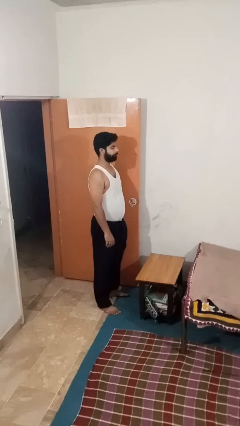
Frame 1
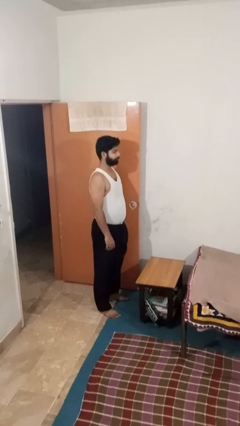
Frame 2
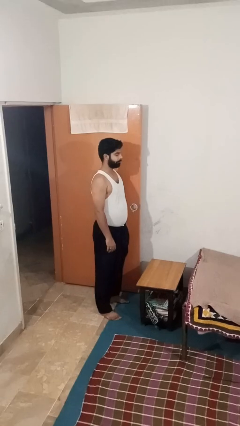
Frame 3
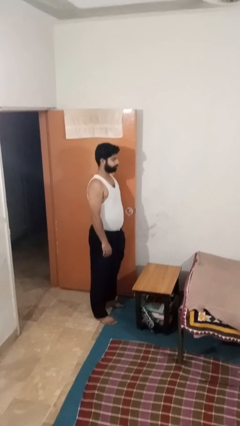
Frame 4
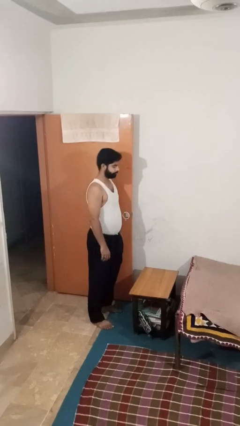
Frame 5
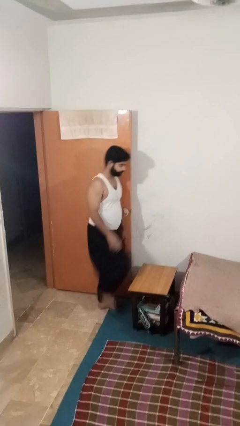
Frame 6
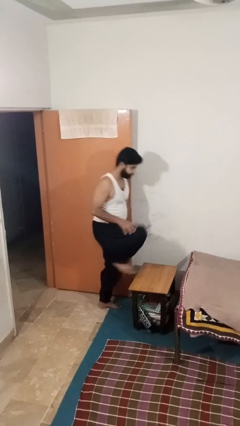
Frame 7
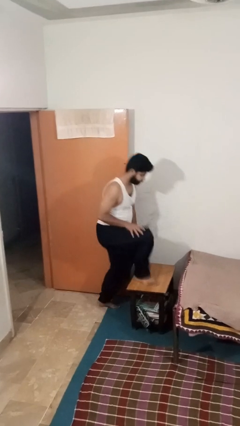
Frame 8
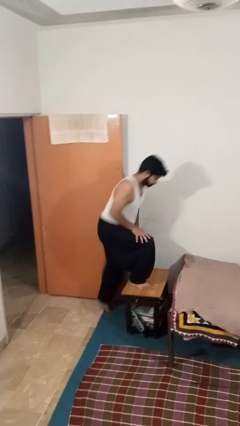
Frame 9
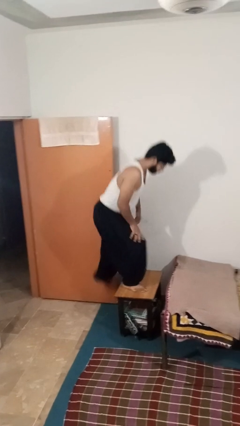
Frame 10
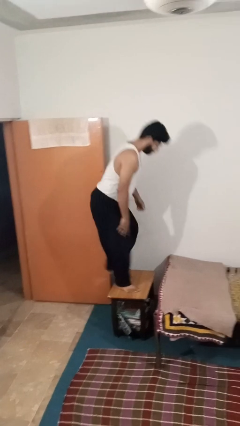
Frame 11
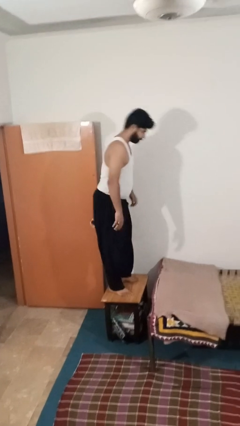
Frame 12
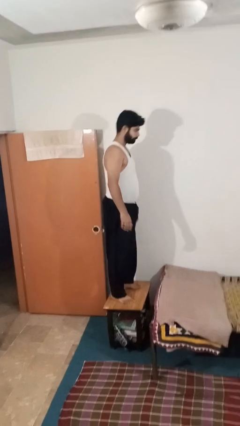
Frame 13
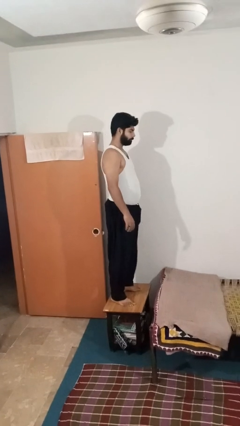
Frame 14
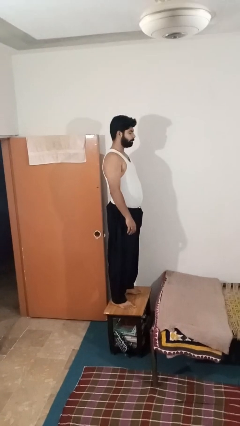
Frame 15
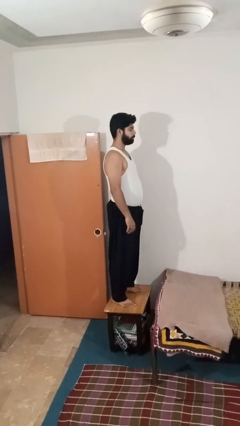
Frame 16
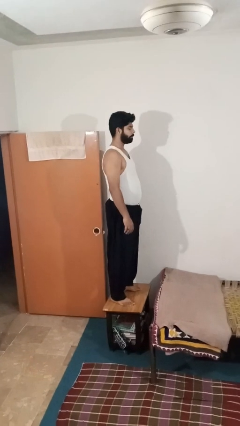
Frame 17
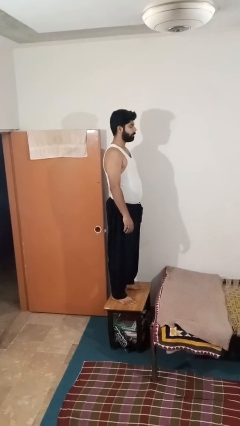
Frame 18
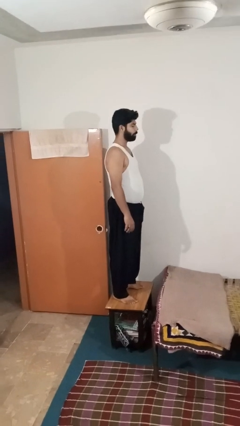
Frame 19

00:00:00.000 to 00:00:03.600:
person climbs on table

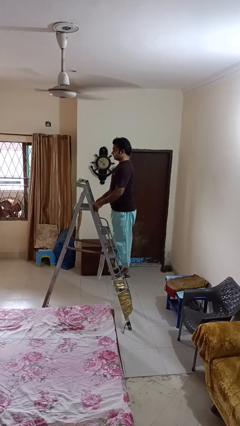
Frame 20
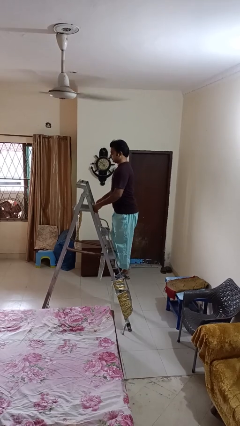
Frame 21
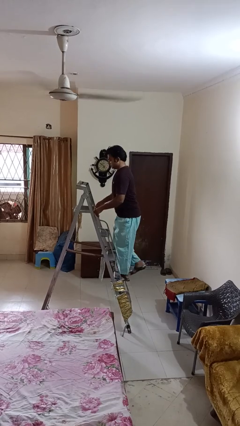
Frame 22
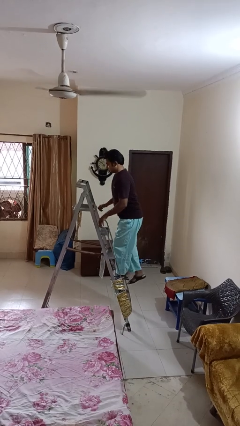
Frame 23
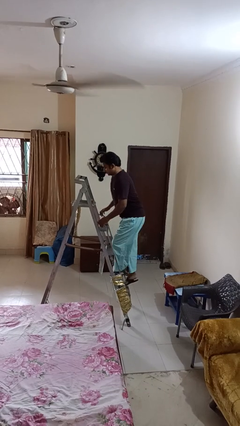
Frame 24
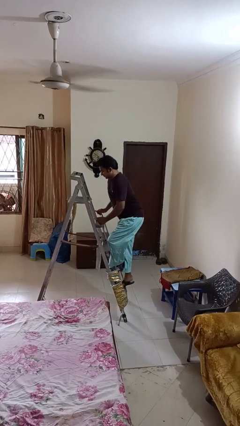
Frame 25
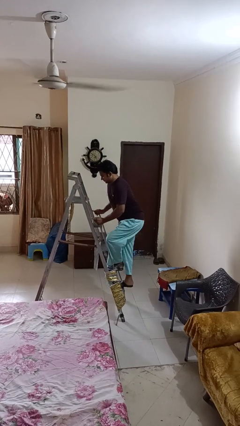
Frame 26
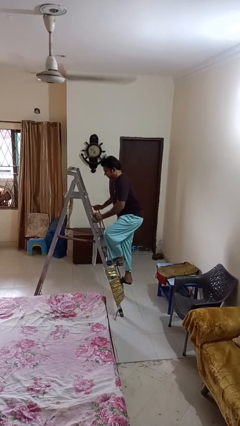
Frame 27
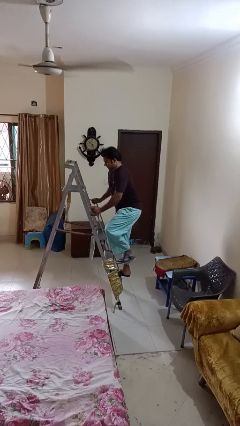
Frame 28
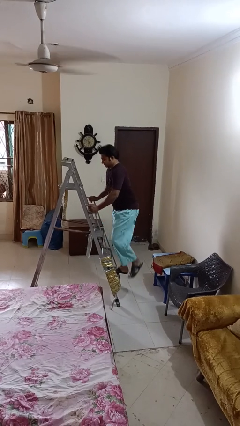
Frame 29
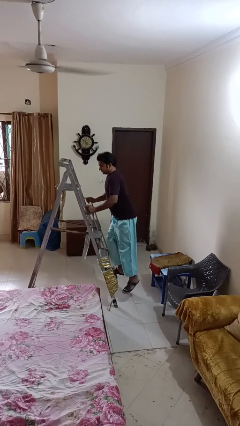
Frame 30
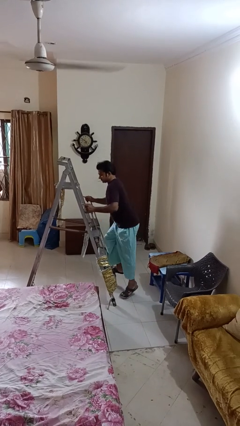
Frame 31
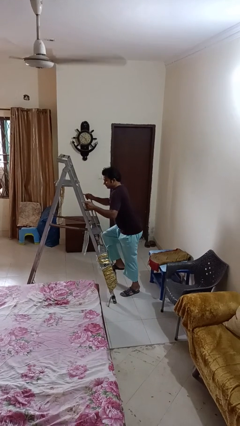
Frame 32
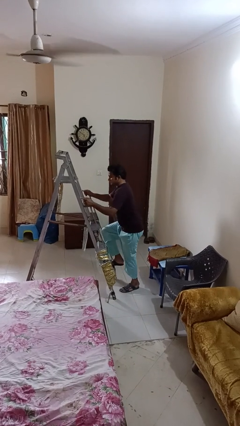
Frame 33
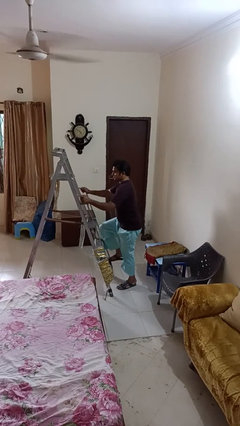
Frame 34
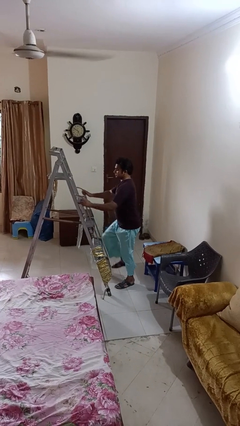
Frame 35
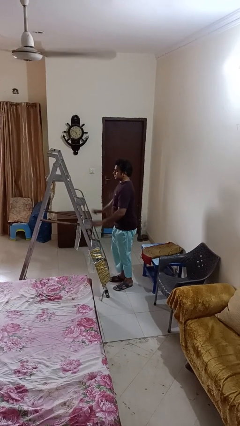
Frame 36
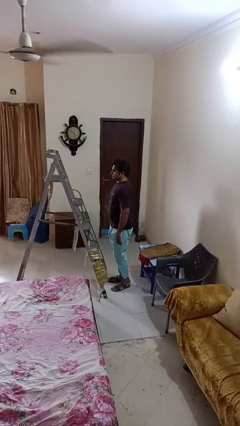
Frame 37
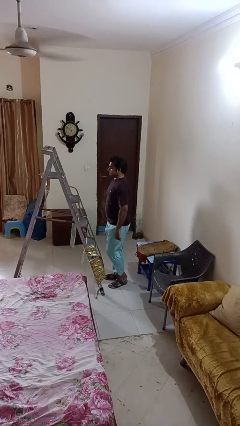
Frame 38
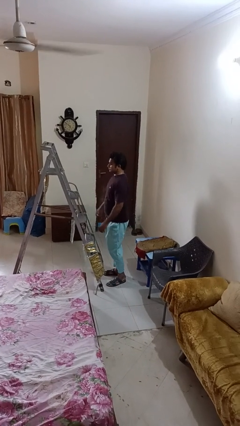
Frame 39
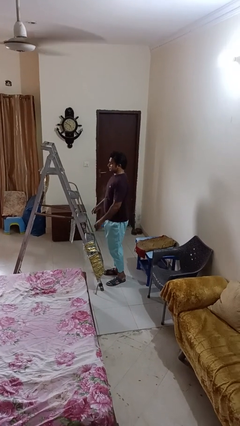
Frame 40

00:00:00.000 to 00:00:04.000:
person climbs down ladder

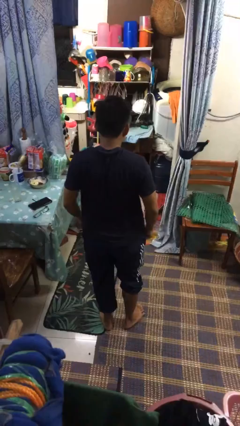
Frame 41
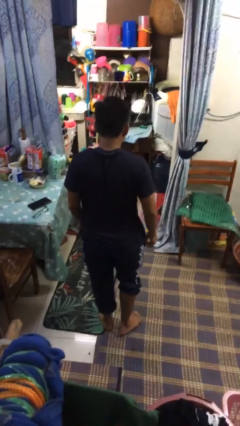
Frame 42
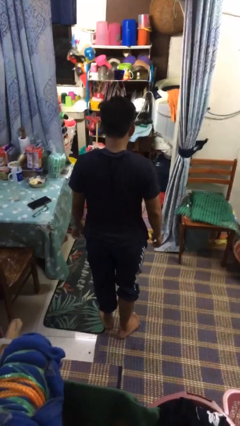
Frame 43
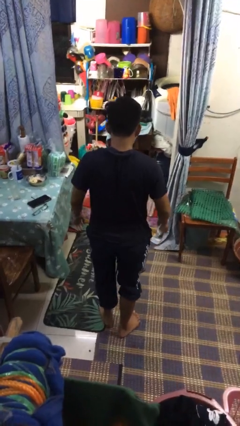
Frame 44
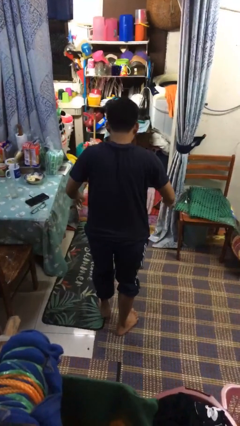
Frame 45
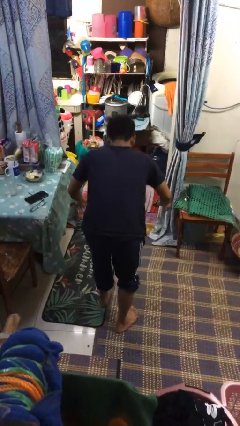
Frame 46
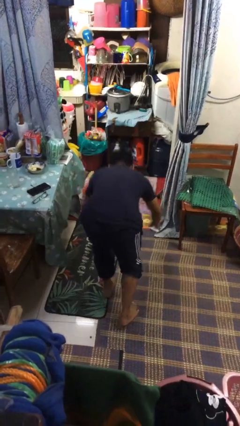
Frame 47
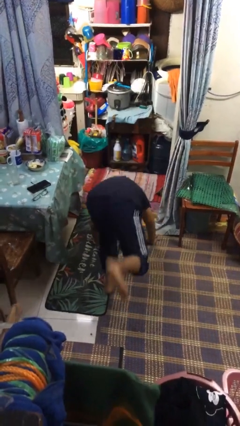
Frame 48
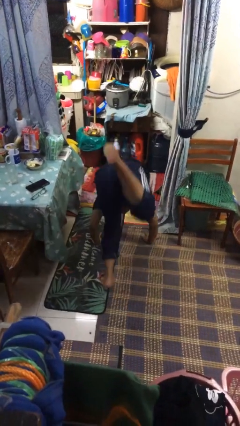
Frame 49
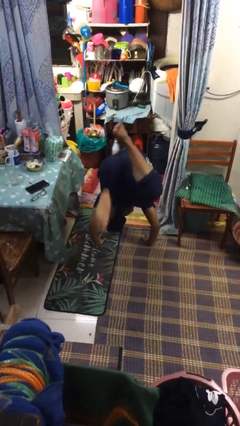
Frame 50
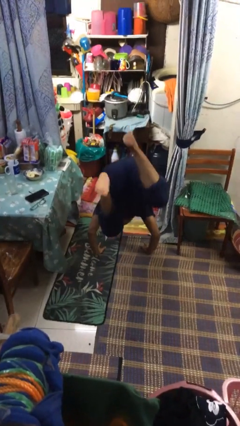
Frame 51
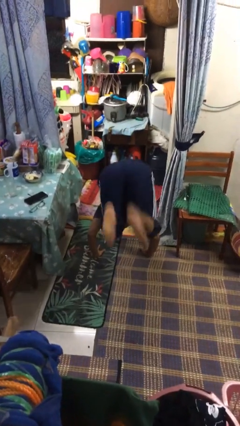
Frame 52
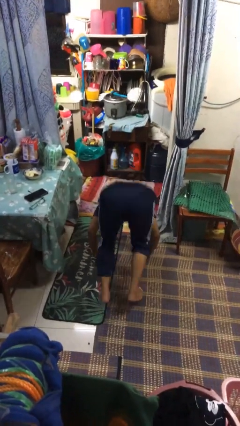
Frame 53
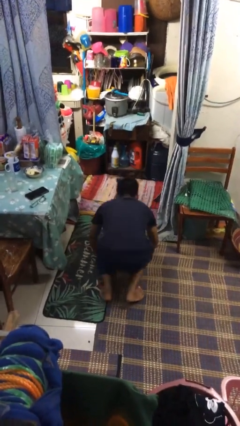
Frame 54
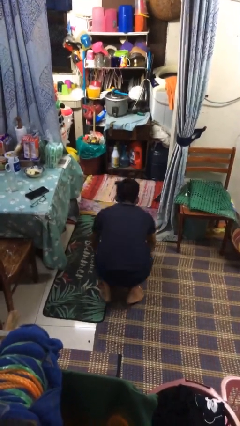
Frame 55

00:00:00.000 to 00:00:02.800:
person handstand

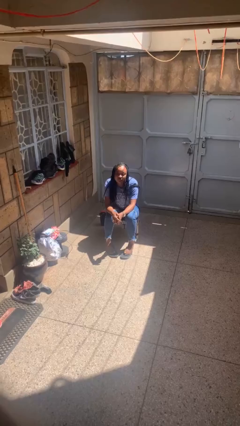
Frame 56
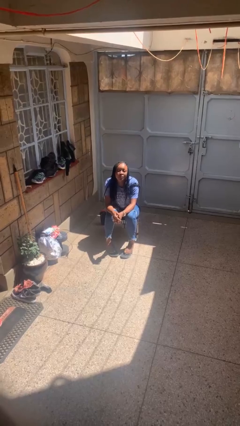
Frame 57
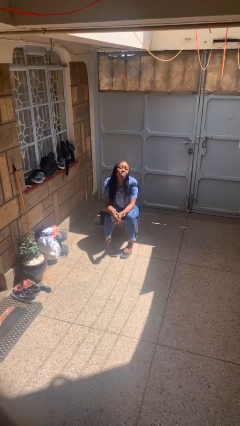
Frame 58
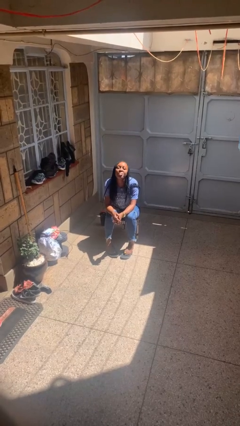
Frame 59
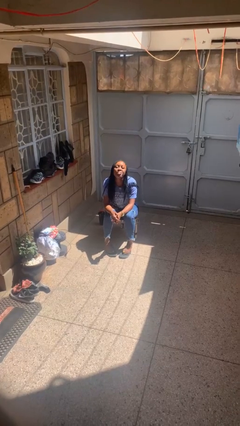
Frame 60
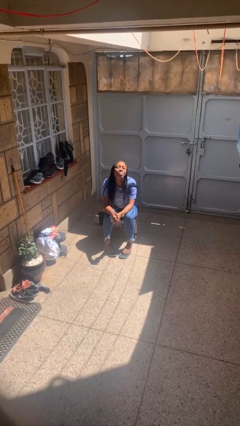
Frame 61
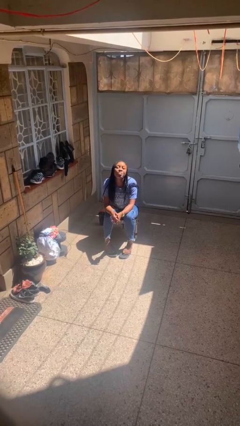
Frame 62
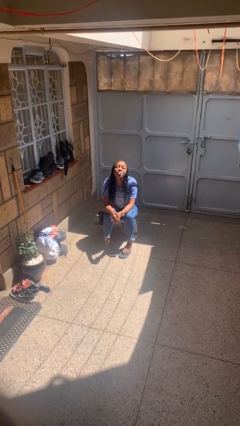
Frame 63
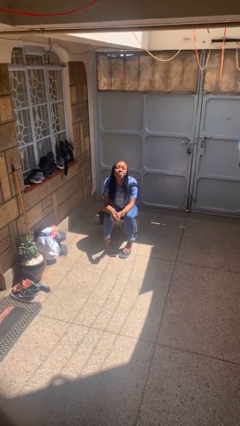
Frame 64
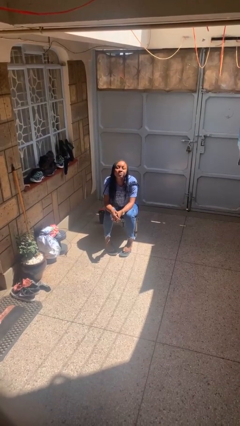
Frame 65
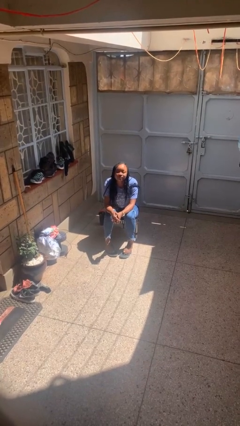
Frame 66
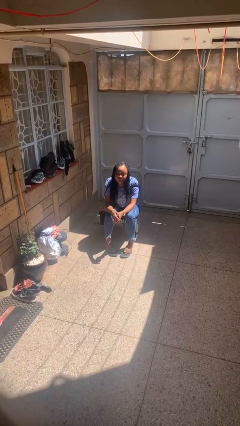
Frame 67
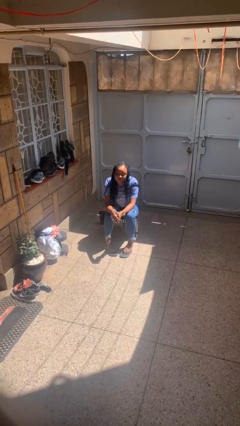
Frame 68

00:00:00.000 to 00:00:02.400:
person sticks out tongue

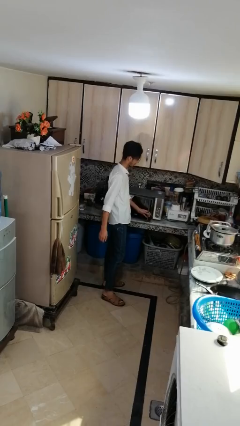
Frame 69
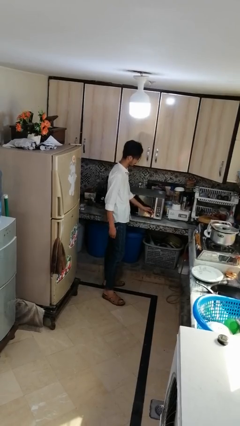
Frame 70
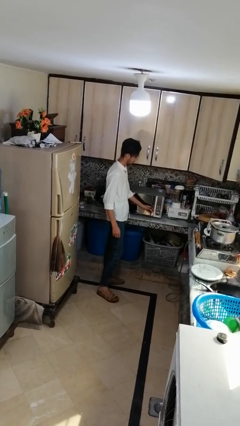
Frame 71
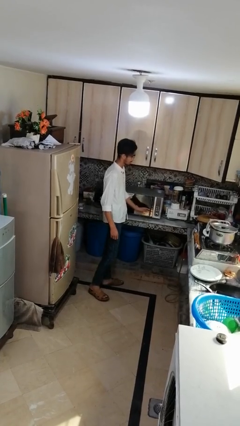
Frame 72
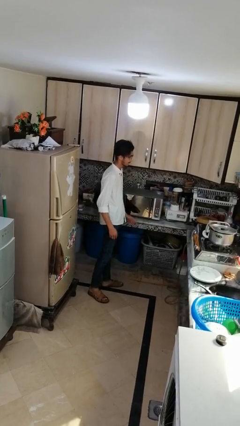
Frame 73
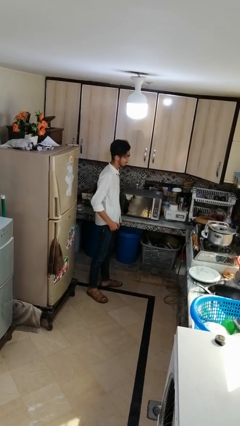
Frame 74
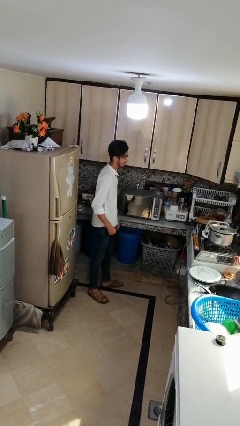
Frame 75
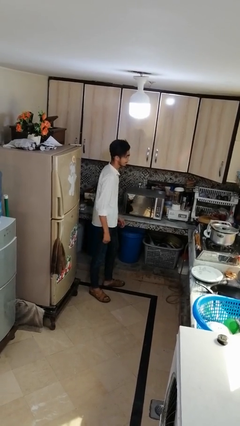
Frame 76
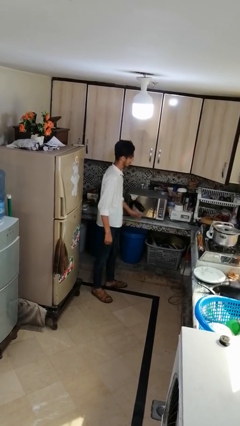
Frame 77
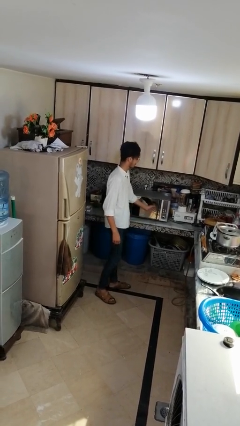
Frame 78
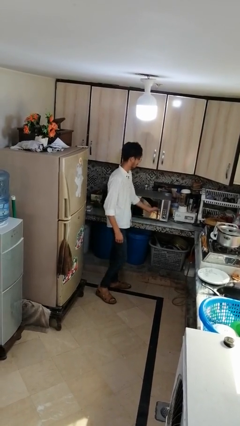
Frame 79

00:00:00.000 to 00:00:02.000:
person closes microwave

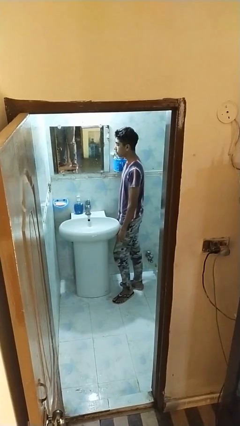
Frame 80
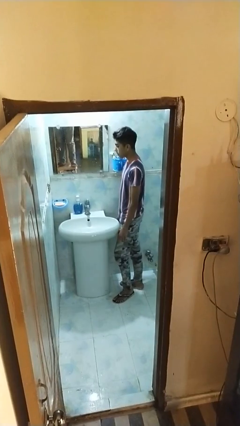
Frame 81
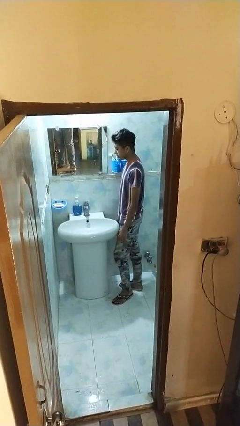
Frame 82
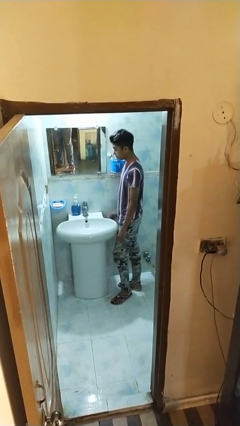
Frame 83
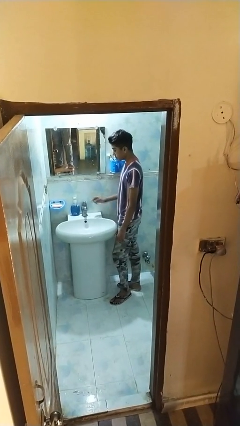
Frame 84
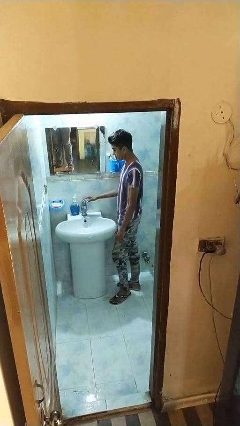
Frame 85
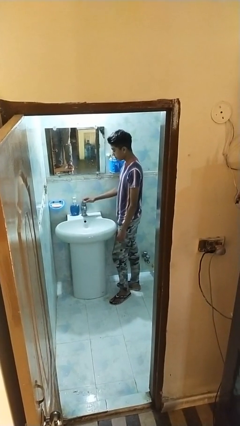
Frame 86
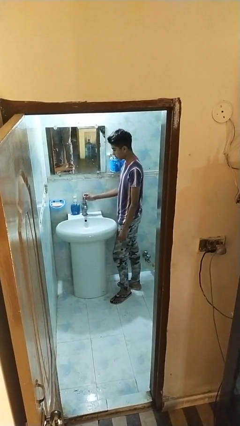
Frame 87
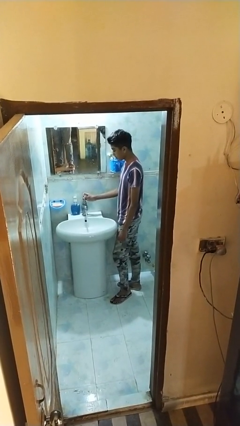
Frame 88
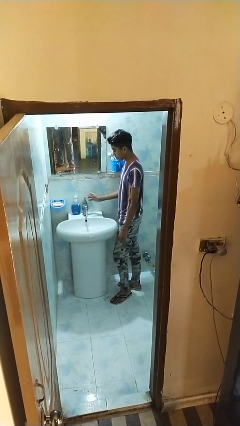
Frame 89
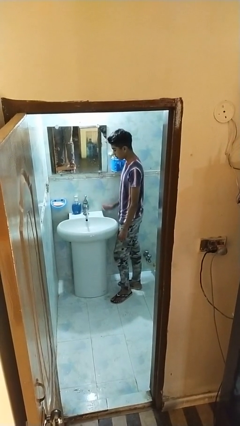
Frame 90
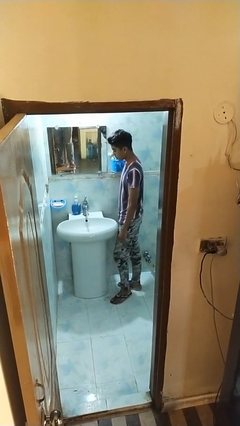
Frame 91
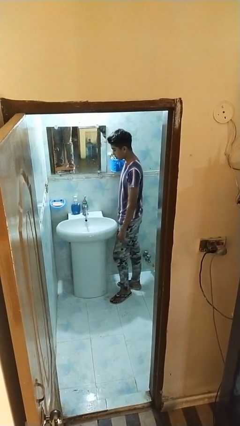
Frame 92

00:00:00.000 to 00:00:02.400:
person turns on faucet

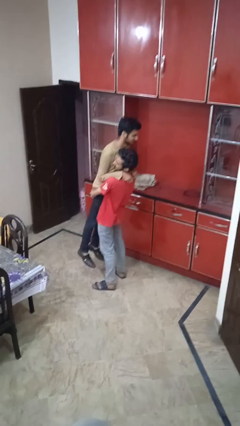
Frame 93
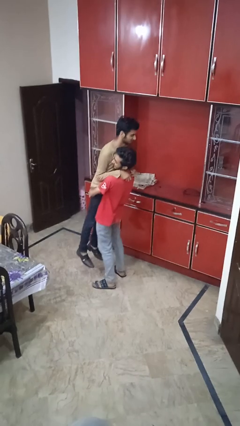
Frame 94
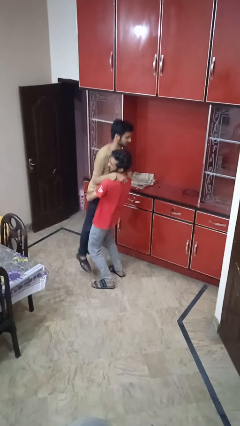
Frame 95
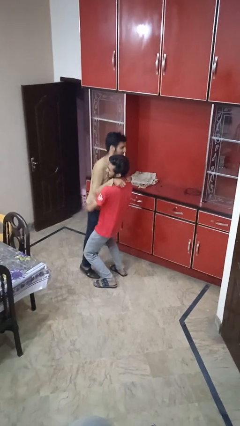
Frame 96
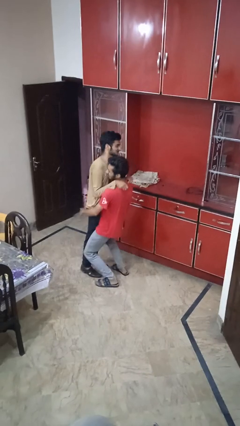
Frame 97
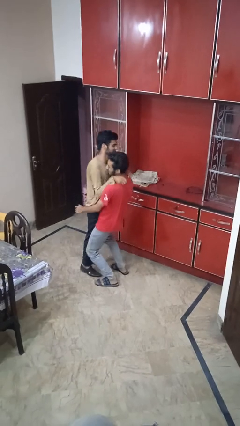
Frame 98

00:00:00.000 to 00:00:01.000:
person puts down person
